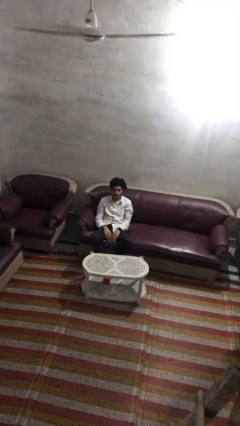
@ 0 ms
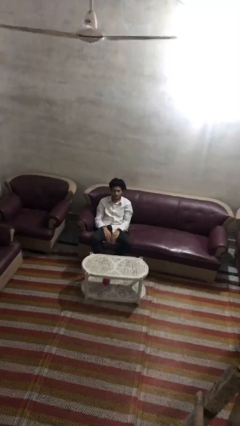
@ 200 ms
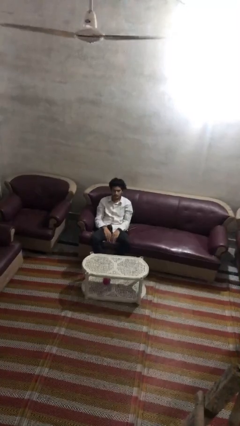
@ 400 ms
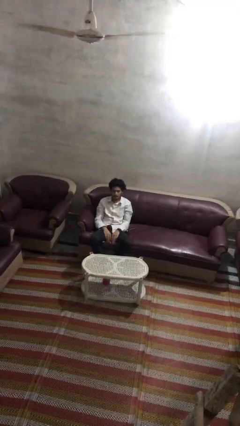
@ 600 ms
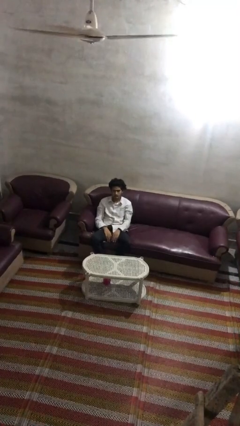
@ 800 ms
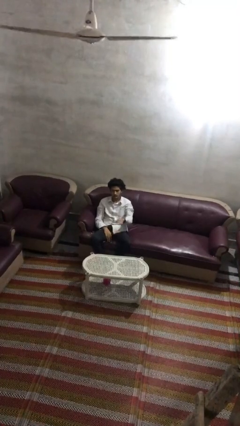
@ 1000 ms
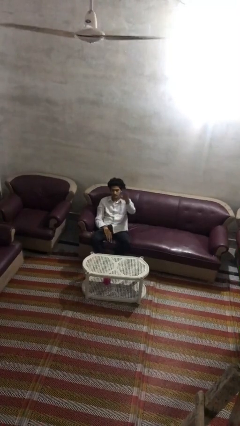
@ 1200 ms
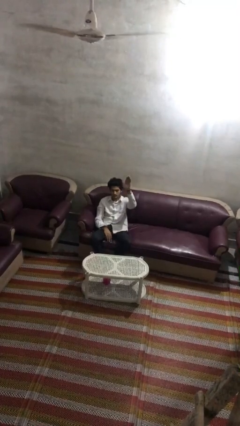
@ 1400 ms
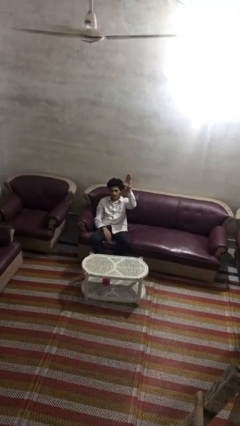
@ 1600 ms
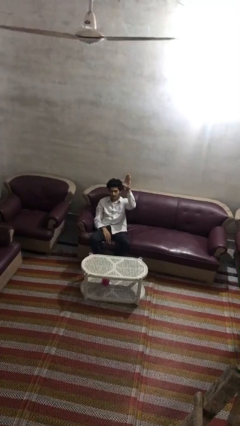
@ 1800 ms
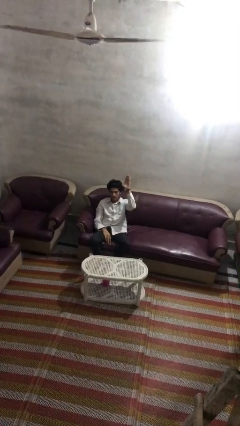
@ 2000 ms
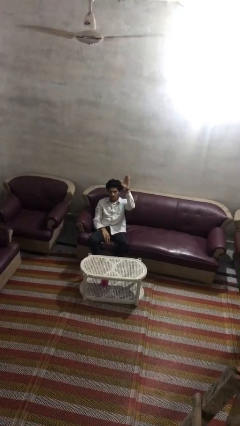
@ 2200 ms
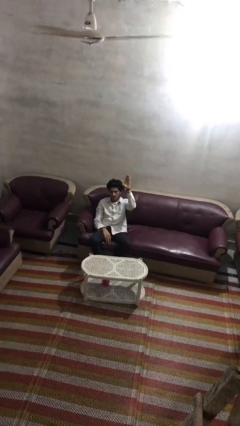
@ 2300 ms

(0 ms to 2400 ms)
person gestures raise hand

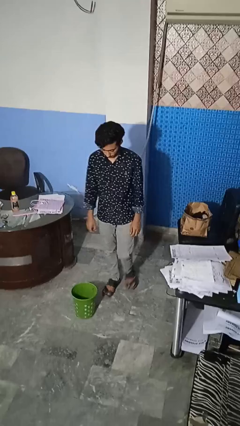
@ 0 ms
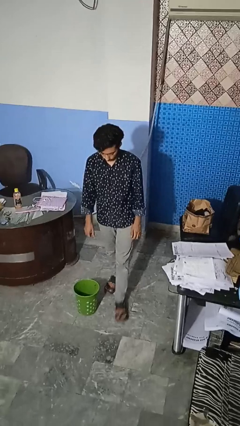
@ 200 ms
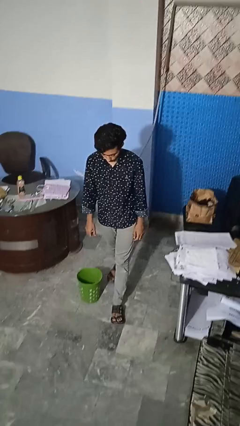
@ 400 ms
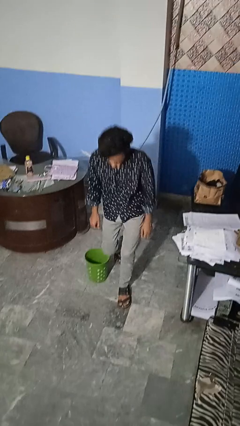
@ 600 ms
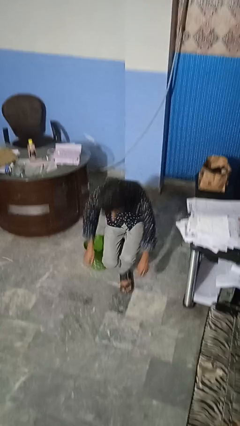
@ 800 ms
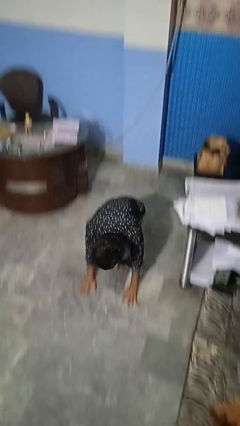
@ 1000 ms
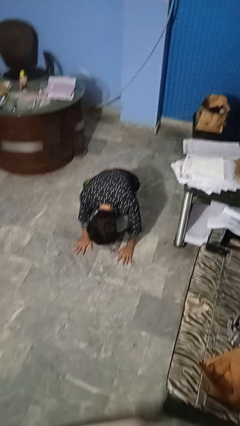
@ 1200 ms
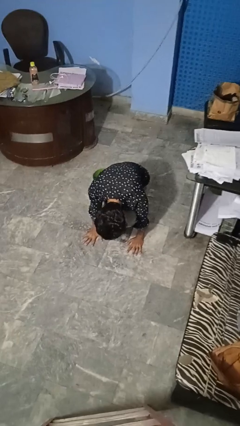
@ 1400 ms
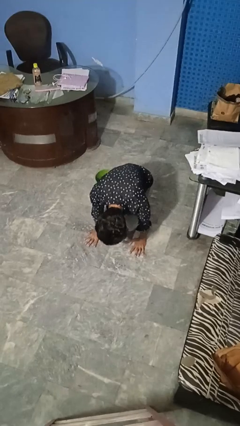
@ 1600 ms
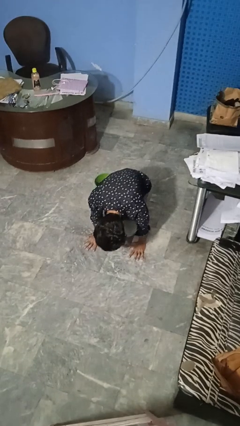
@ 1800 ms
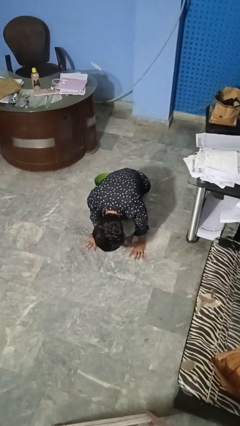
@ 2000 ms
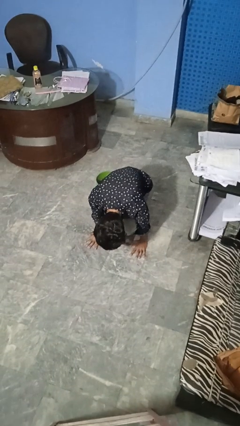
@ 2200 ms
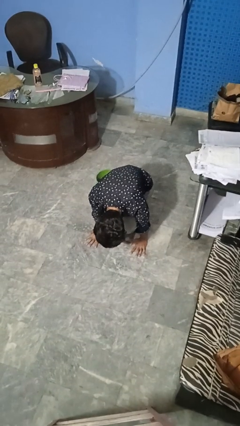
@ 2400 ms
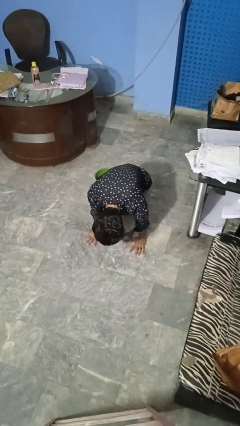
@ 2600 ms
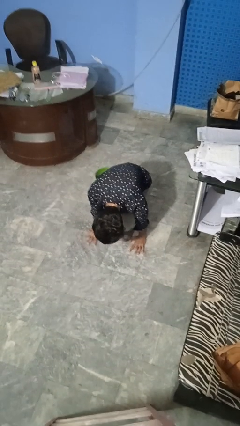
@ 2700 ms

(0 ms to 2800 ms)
person trips on object on floor

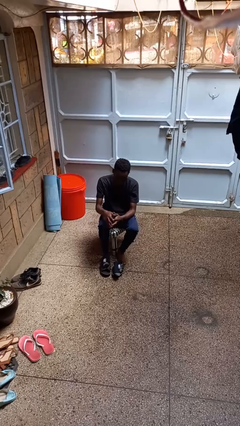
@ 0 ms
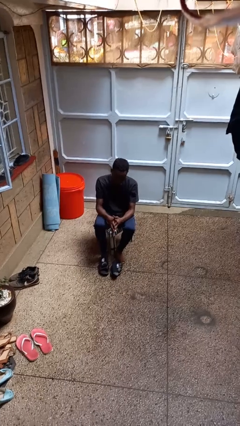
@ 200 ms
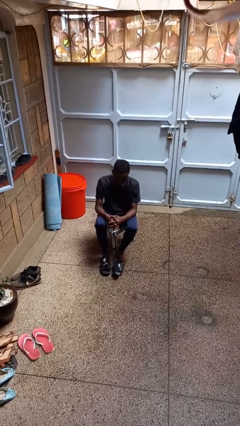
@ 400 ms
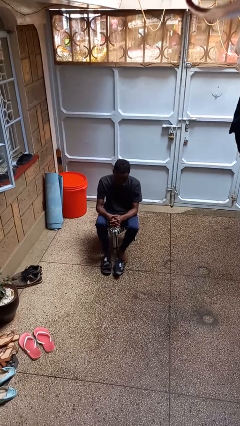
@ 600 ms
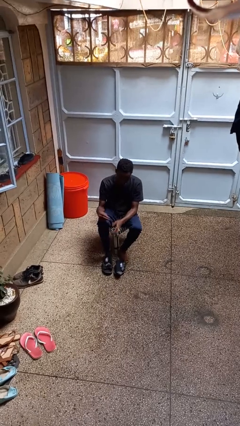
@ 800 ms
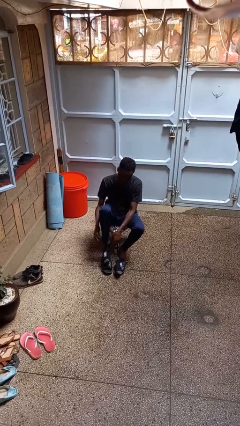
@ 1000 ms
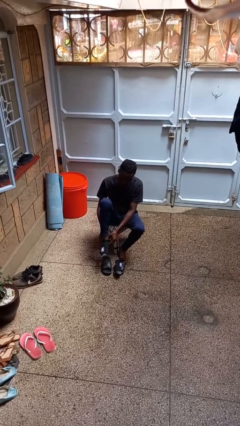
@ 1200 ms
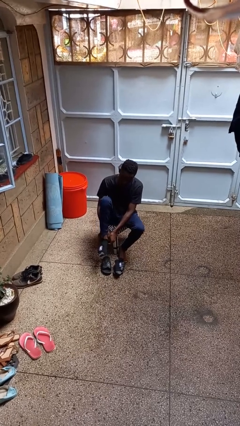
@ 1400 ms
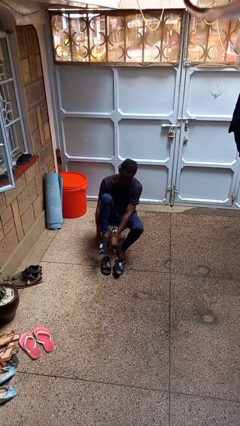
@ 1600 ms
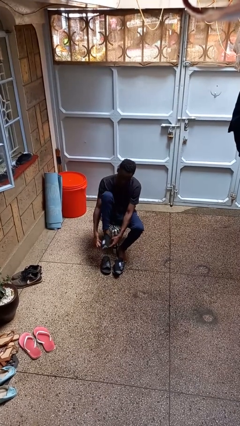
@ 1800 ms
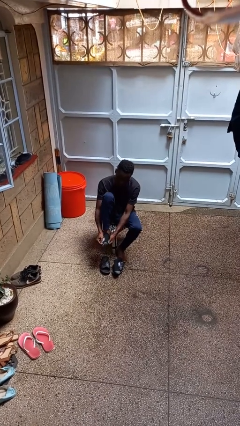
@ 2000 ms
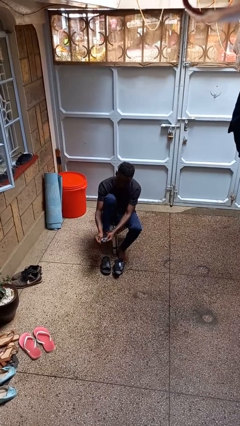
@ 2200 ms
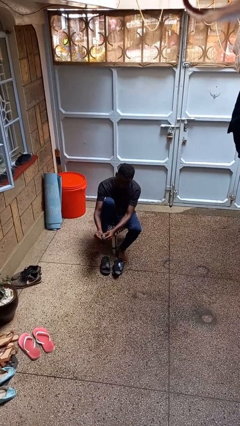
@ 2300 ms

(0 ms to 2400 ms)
person takes off socks

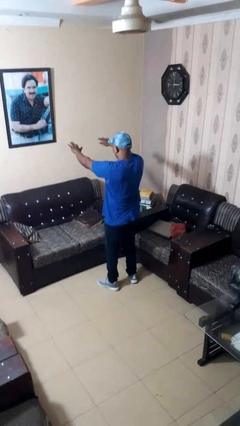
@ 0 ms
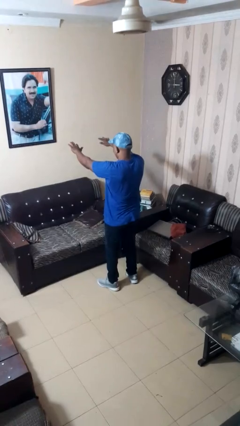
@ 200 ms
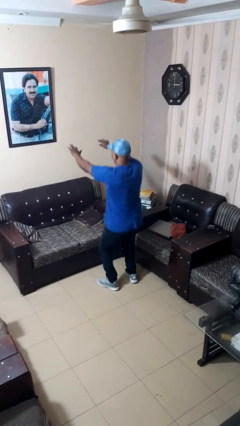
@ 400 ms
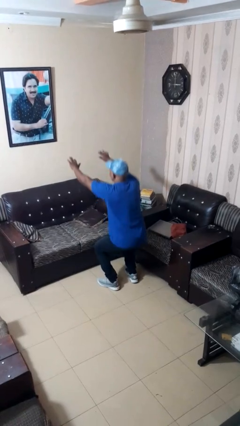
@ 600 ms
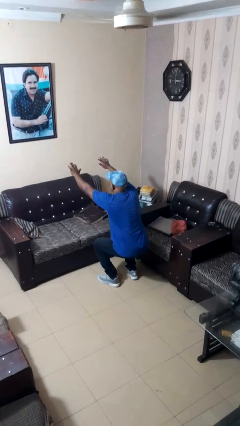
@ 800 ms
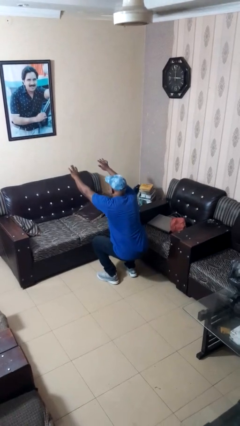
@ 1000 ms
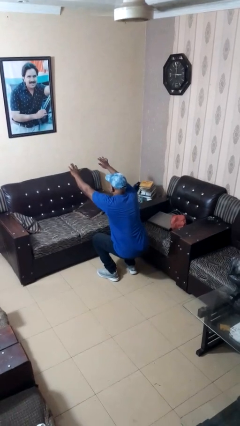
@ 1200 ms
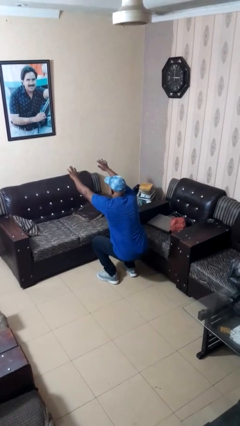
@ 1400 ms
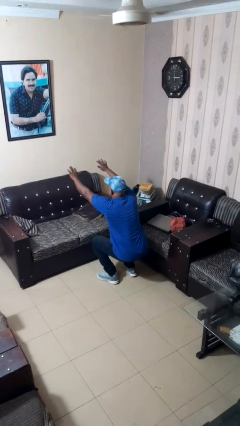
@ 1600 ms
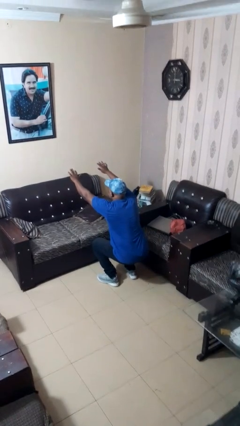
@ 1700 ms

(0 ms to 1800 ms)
person squats

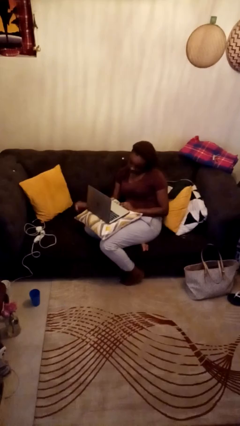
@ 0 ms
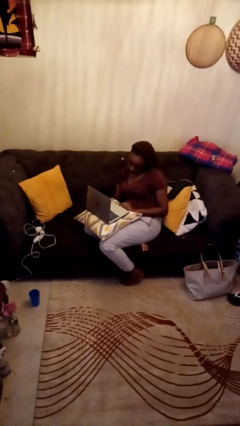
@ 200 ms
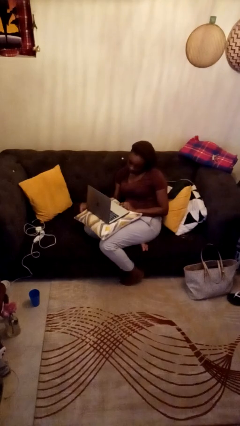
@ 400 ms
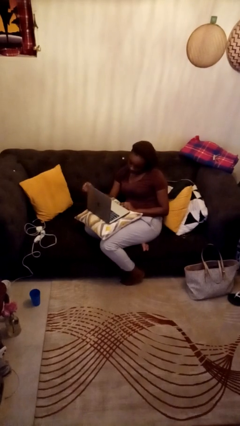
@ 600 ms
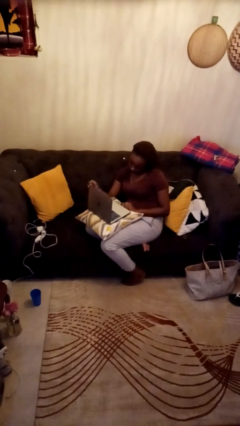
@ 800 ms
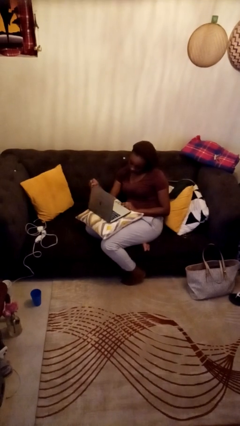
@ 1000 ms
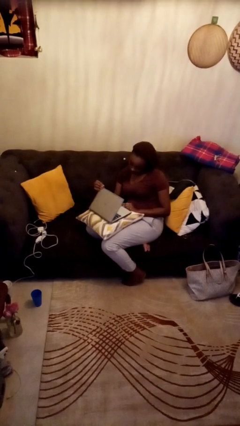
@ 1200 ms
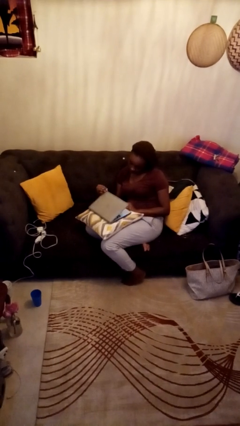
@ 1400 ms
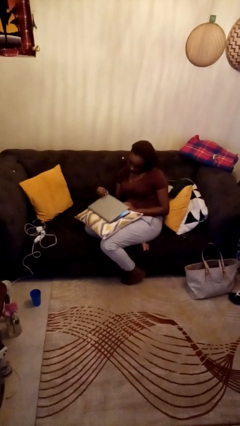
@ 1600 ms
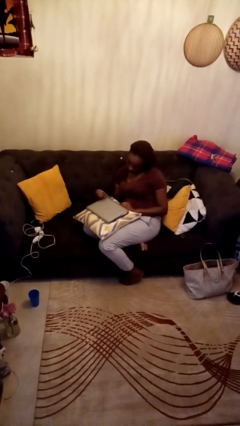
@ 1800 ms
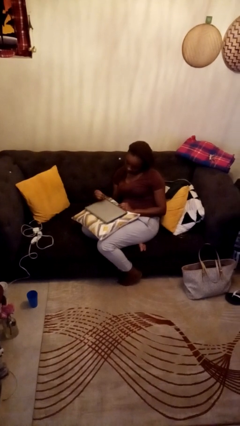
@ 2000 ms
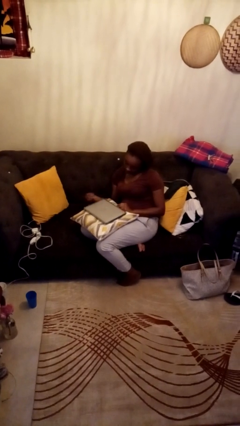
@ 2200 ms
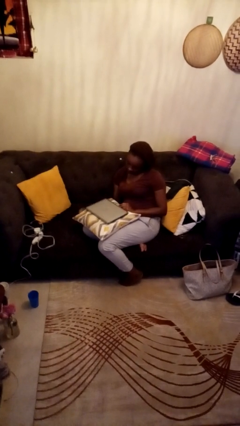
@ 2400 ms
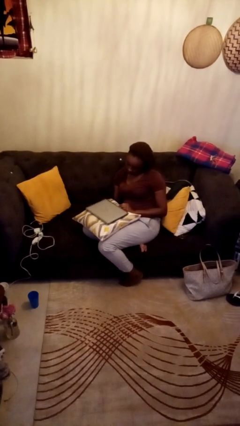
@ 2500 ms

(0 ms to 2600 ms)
person closes laptop

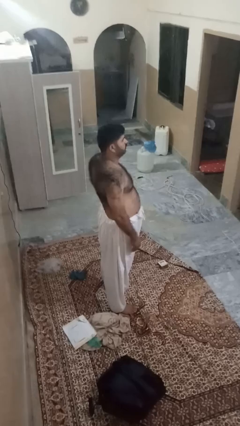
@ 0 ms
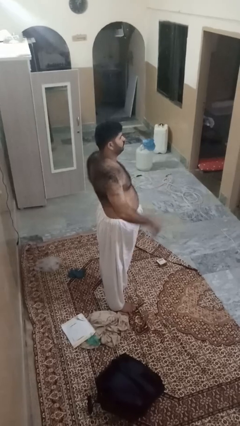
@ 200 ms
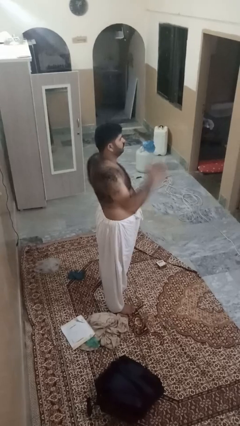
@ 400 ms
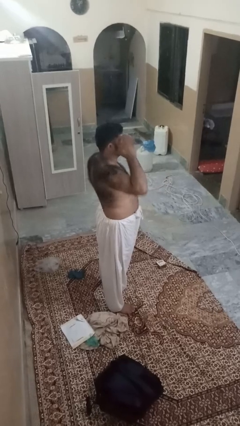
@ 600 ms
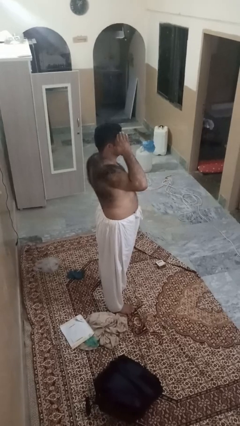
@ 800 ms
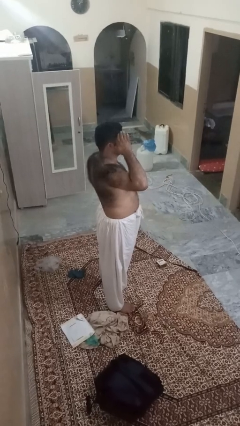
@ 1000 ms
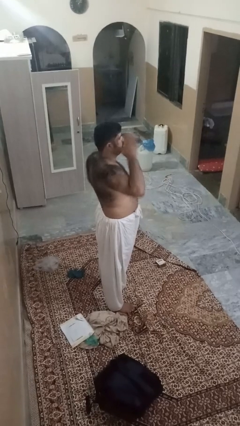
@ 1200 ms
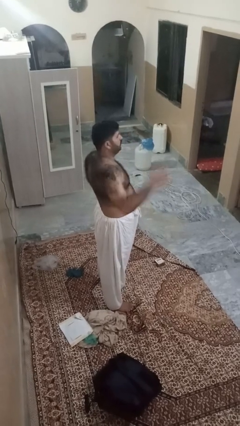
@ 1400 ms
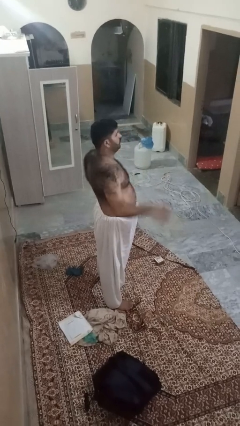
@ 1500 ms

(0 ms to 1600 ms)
person salutes

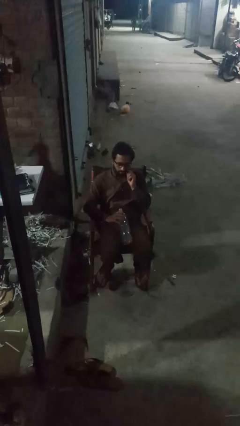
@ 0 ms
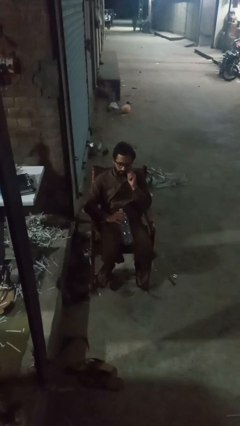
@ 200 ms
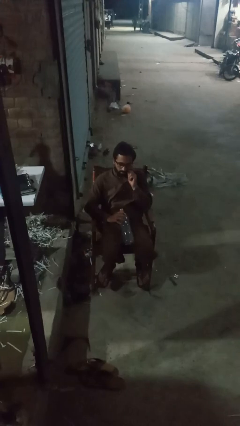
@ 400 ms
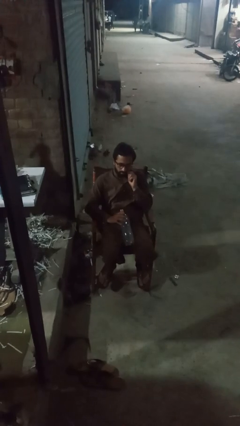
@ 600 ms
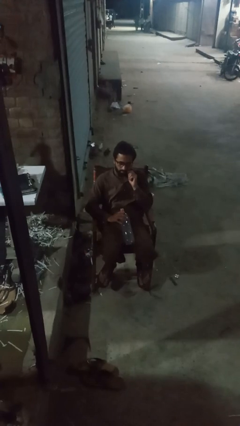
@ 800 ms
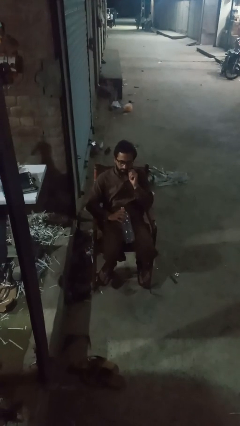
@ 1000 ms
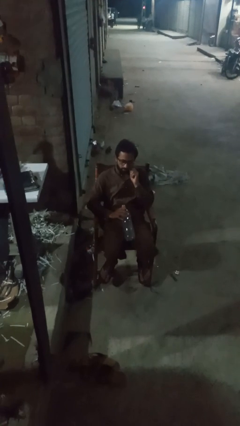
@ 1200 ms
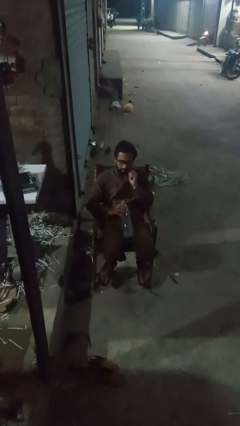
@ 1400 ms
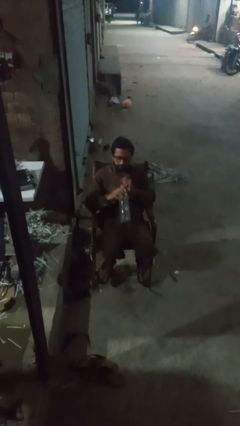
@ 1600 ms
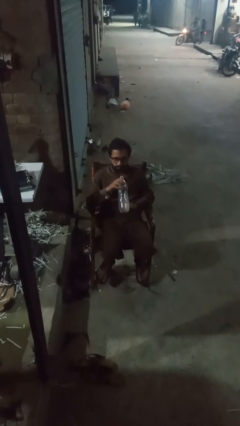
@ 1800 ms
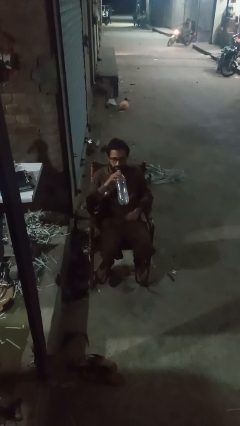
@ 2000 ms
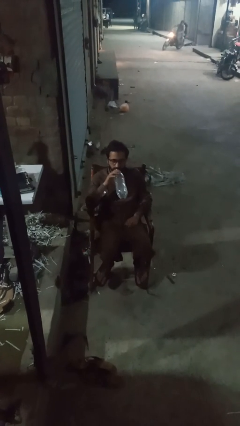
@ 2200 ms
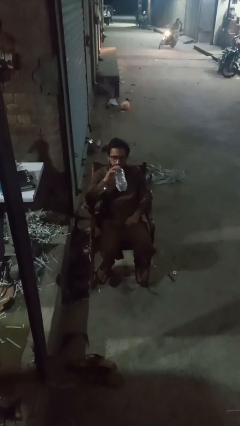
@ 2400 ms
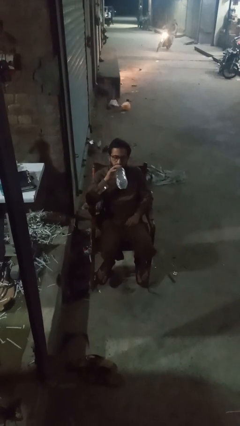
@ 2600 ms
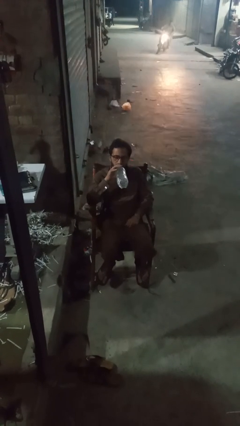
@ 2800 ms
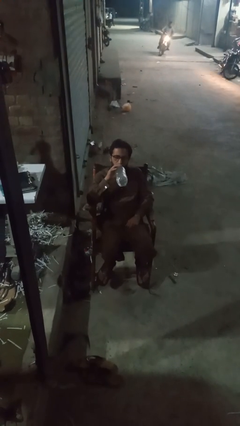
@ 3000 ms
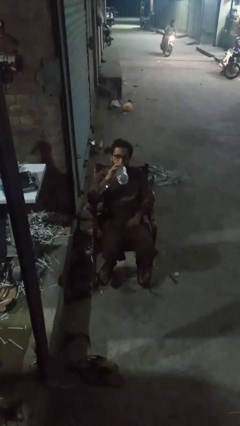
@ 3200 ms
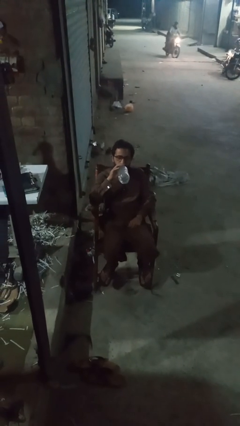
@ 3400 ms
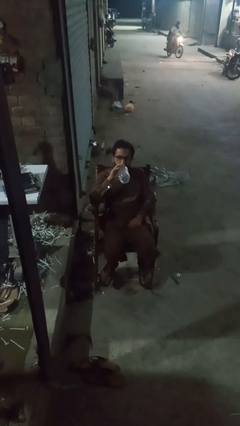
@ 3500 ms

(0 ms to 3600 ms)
person drinks from bottle
